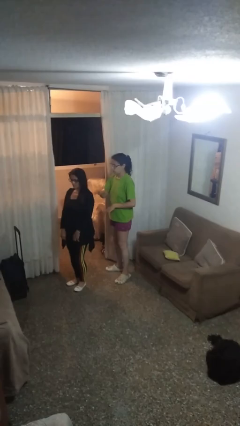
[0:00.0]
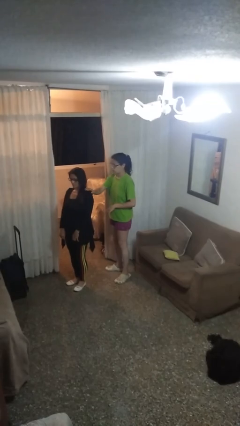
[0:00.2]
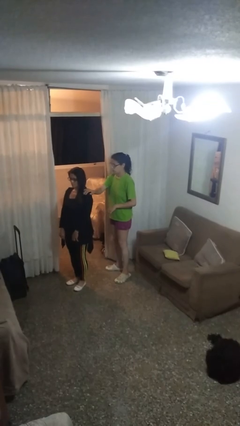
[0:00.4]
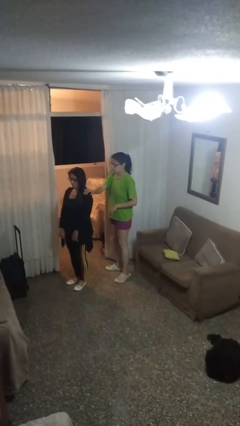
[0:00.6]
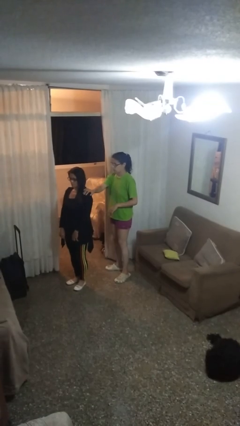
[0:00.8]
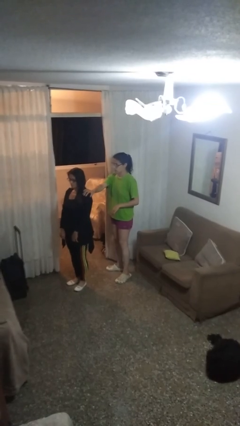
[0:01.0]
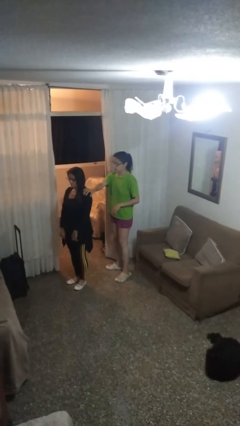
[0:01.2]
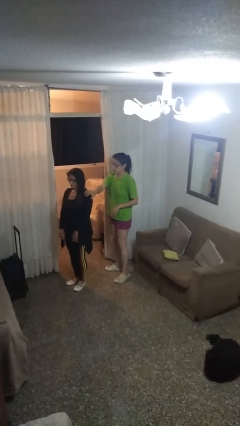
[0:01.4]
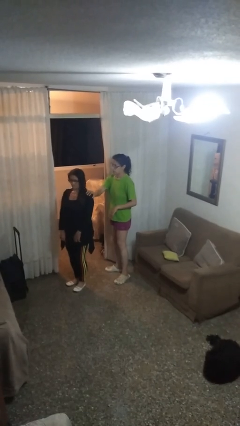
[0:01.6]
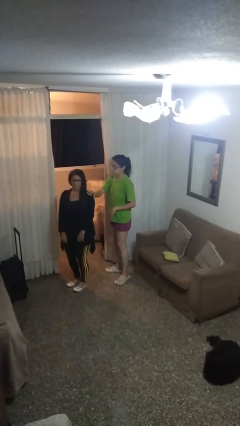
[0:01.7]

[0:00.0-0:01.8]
person grabs person by shoulder

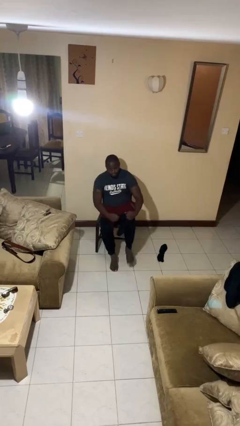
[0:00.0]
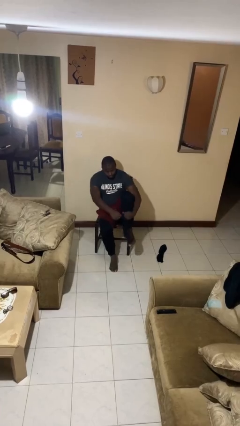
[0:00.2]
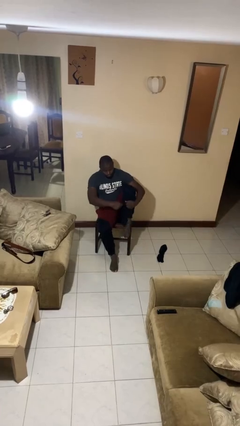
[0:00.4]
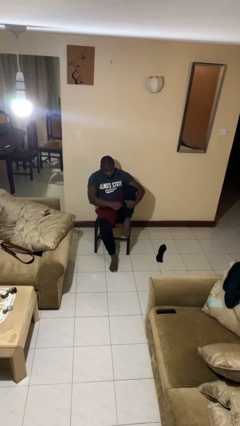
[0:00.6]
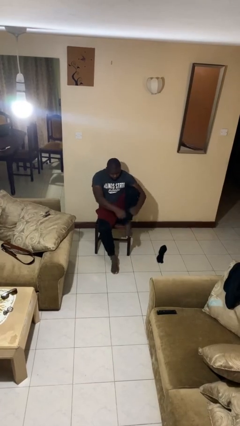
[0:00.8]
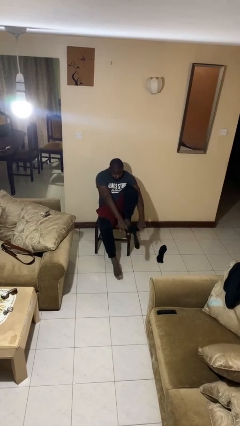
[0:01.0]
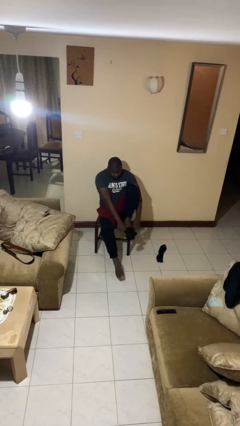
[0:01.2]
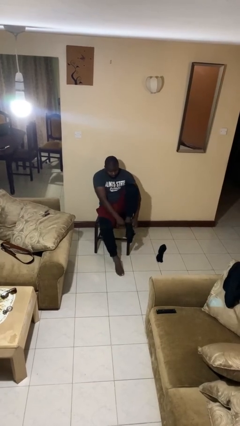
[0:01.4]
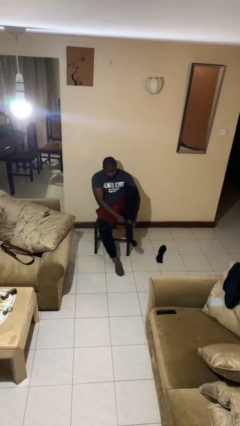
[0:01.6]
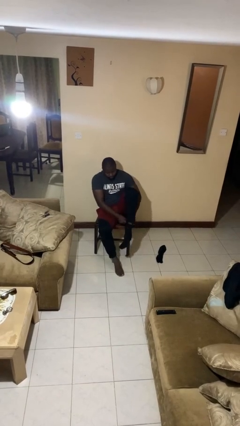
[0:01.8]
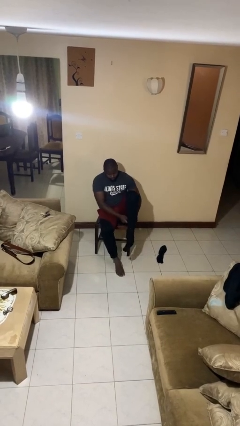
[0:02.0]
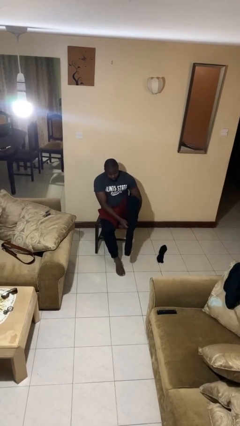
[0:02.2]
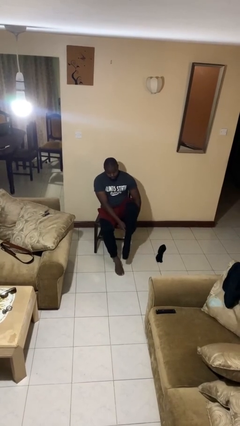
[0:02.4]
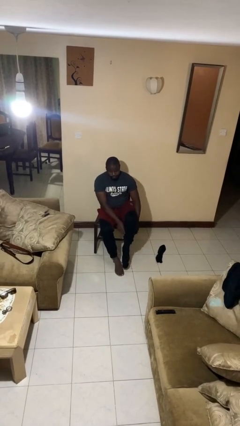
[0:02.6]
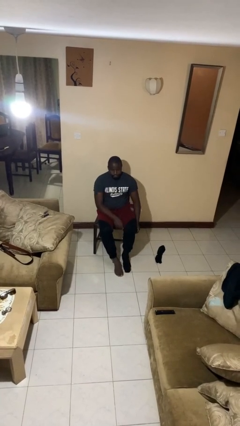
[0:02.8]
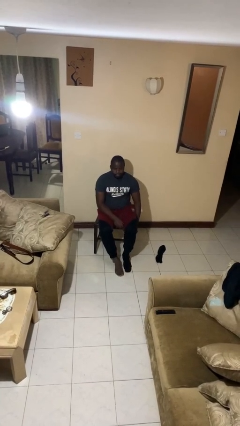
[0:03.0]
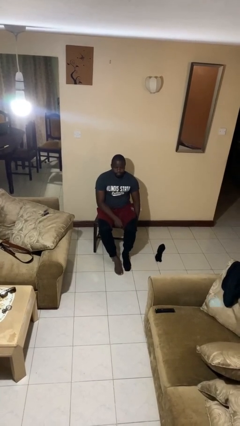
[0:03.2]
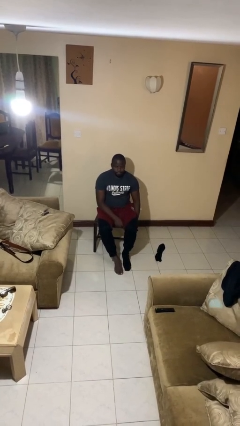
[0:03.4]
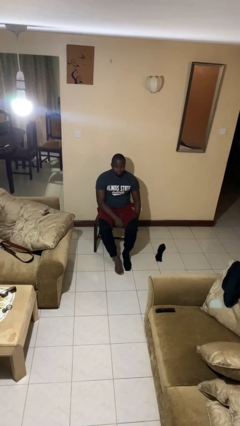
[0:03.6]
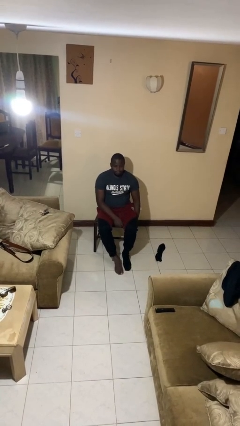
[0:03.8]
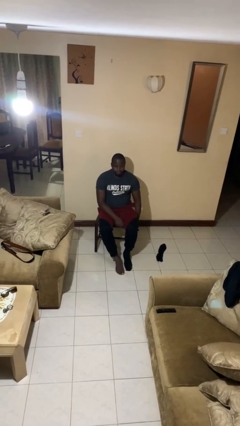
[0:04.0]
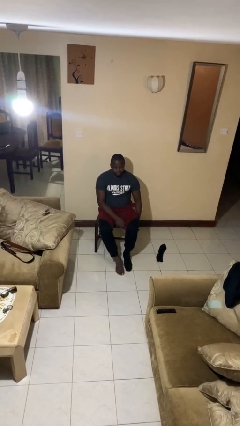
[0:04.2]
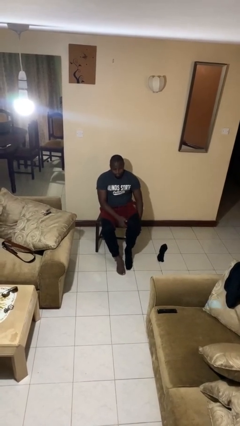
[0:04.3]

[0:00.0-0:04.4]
person puts on socks

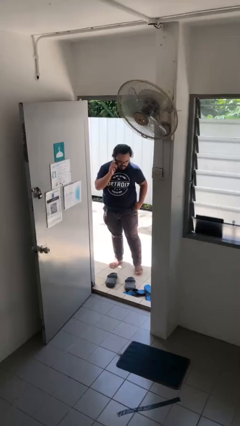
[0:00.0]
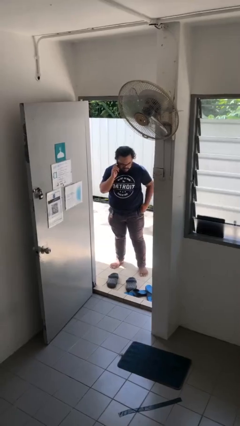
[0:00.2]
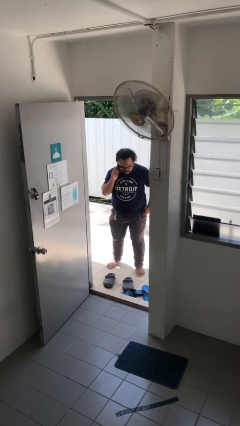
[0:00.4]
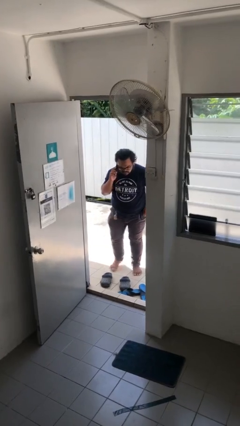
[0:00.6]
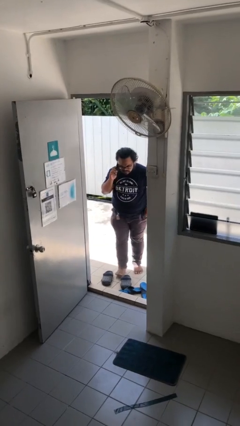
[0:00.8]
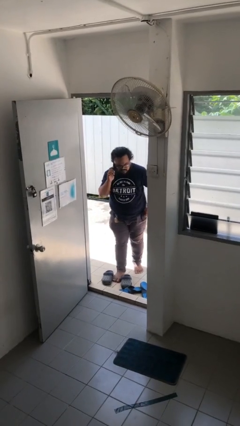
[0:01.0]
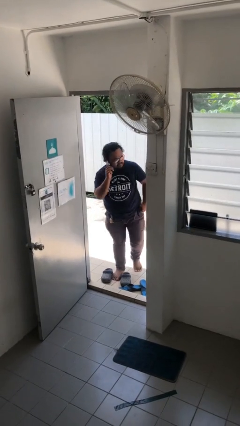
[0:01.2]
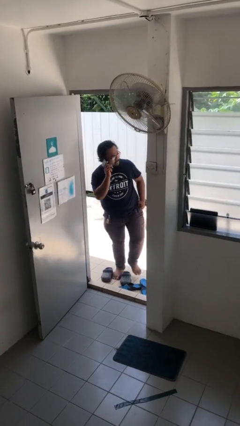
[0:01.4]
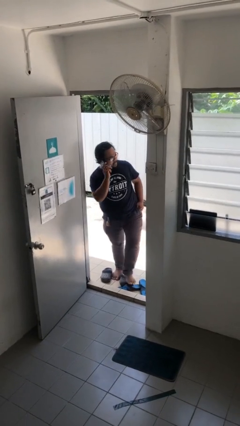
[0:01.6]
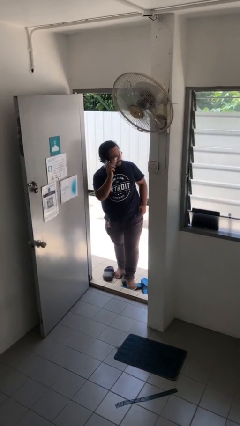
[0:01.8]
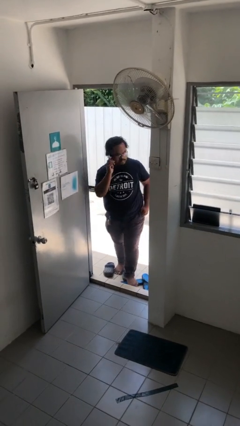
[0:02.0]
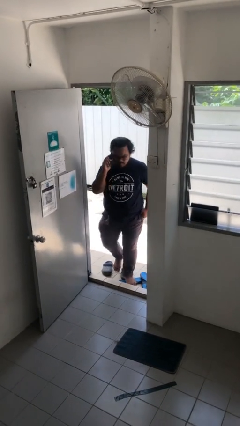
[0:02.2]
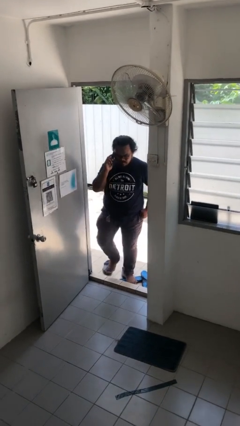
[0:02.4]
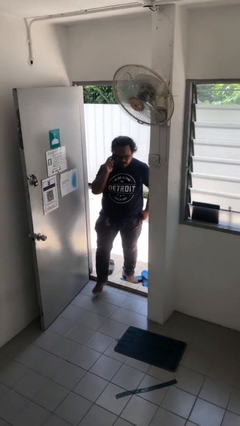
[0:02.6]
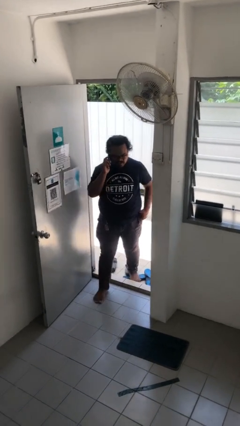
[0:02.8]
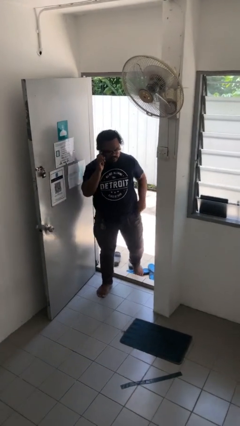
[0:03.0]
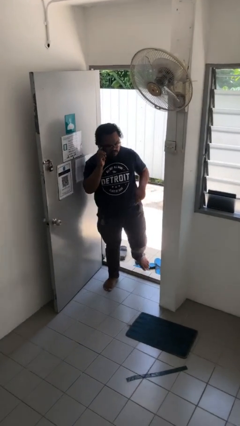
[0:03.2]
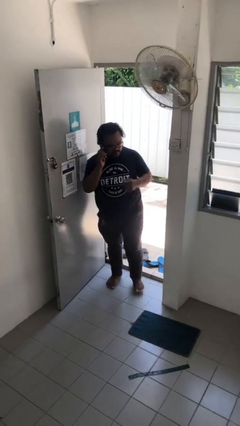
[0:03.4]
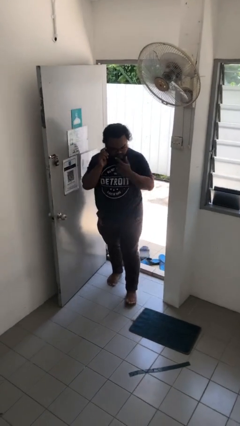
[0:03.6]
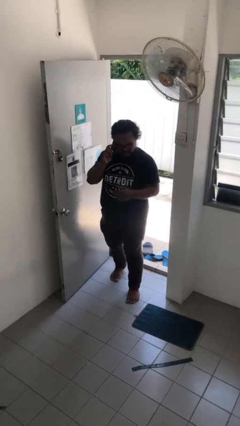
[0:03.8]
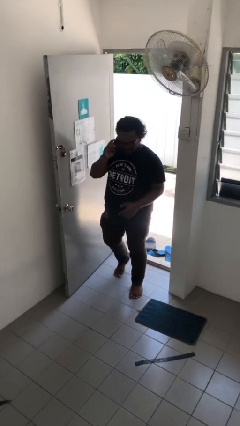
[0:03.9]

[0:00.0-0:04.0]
person enters scene through structure

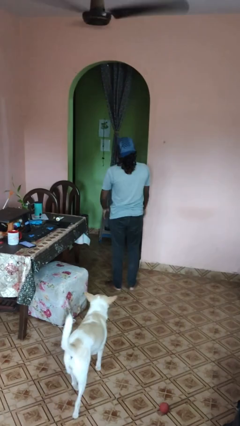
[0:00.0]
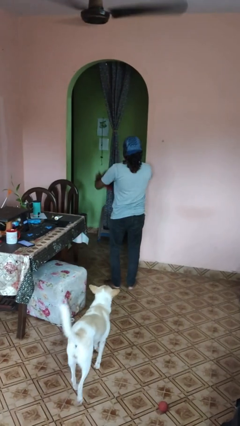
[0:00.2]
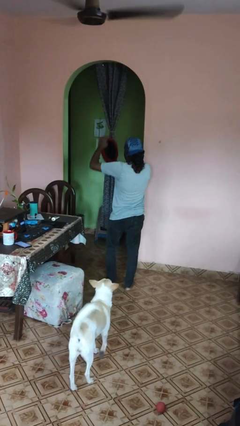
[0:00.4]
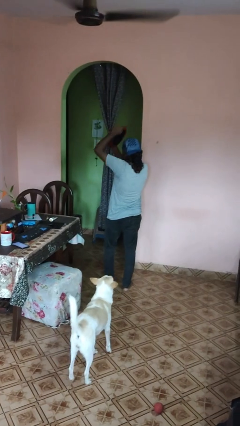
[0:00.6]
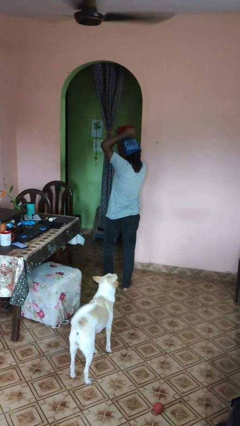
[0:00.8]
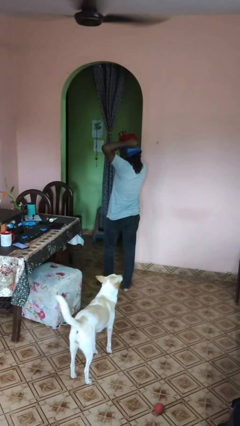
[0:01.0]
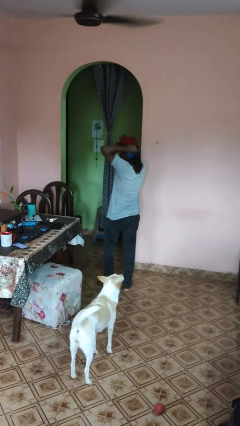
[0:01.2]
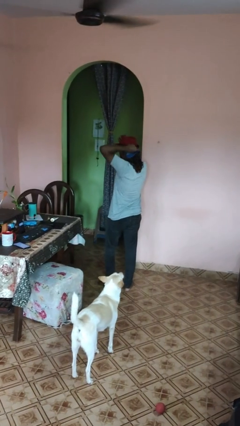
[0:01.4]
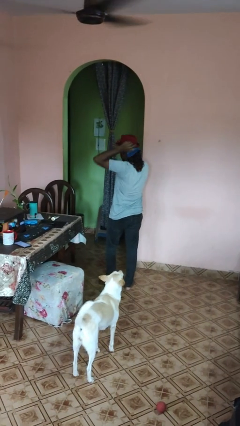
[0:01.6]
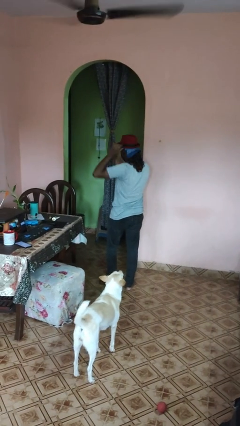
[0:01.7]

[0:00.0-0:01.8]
person puts on hat

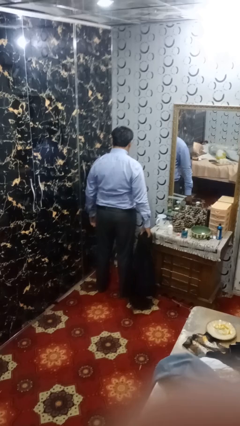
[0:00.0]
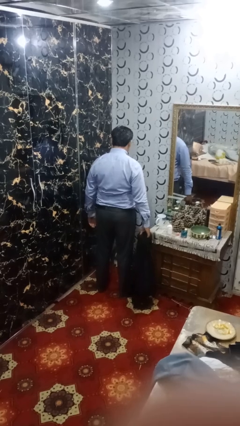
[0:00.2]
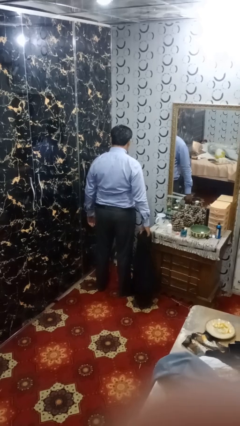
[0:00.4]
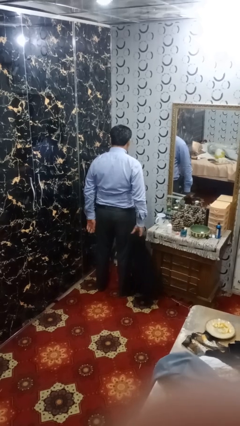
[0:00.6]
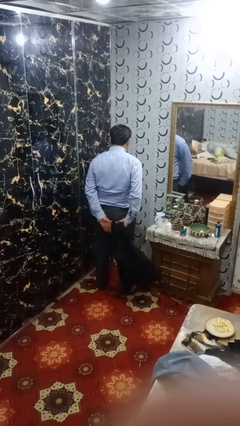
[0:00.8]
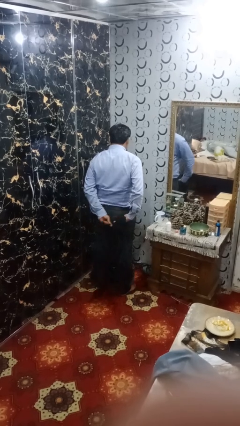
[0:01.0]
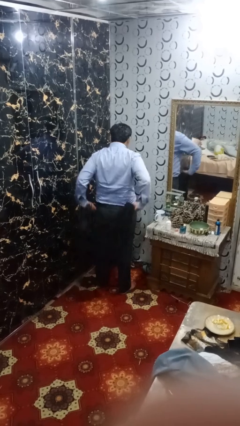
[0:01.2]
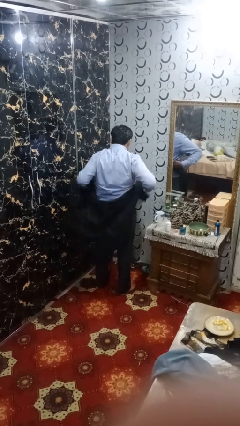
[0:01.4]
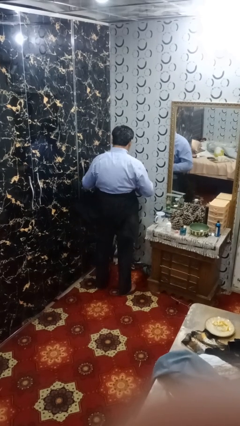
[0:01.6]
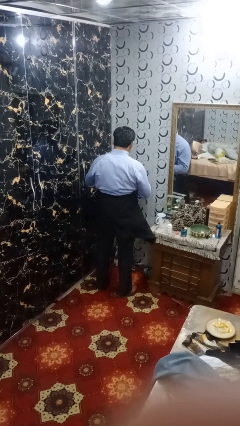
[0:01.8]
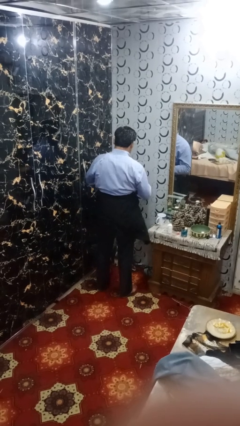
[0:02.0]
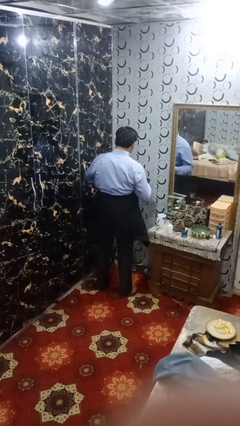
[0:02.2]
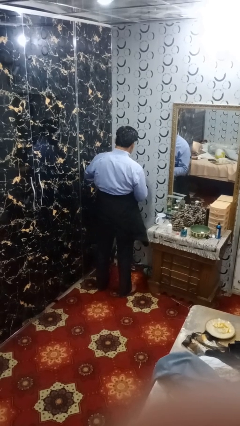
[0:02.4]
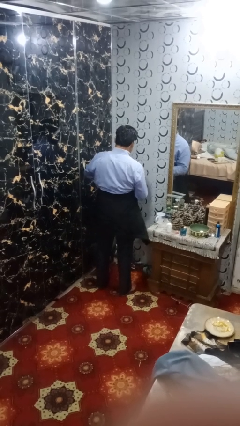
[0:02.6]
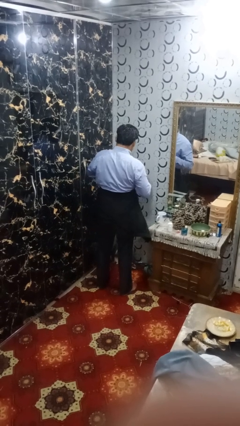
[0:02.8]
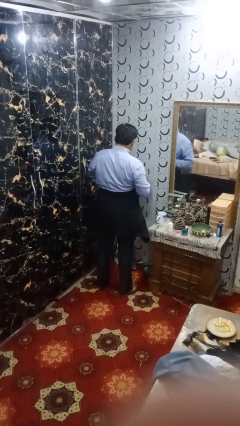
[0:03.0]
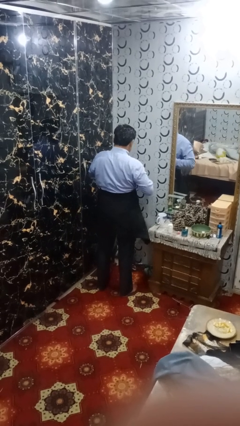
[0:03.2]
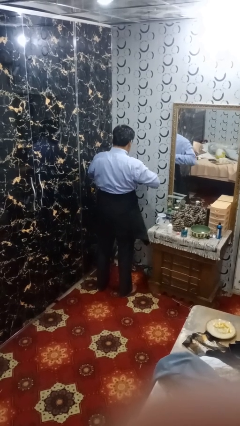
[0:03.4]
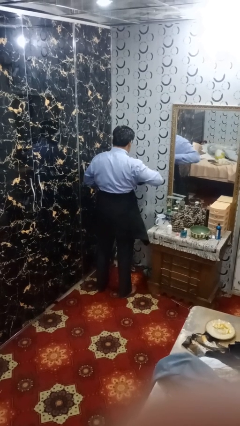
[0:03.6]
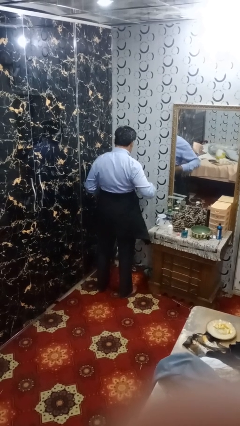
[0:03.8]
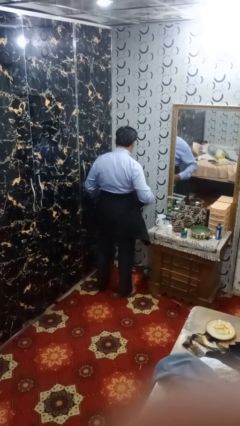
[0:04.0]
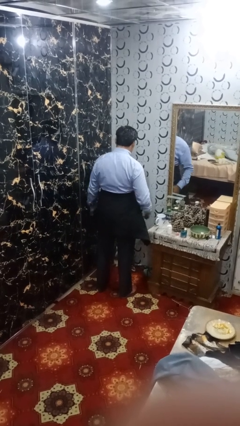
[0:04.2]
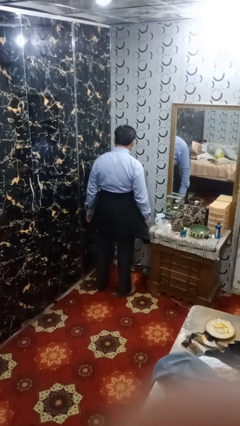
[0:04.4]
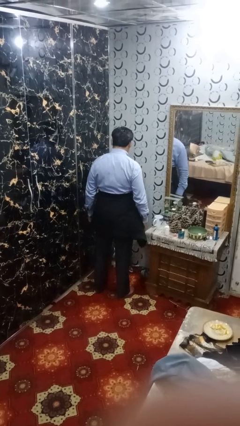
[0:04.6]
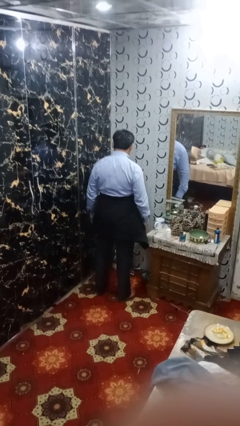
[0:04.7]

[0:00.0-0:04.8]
person ties jacket around waist

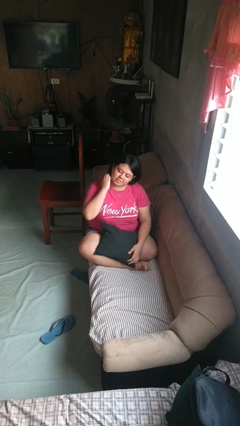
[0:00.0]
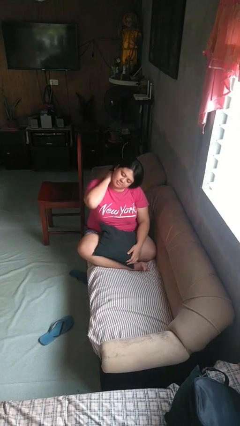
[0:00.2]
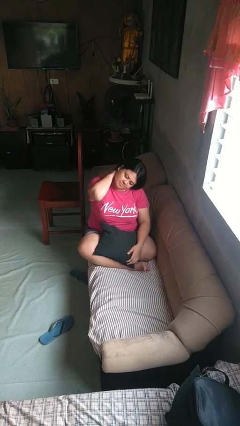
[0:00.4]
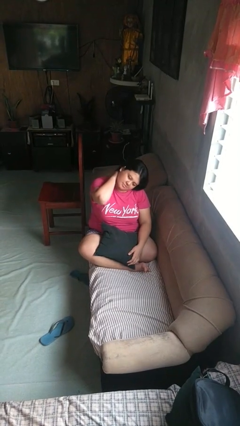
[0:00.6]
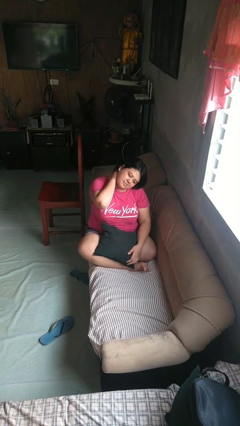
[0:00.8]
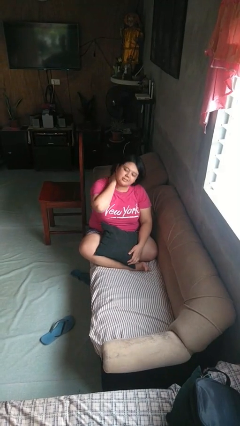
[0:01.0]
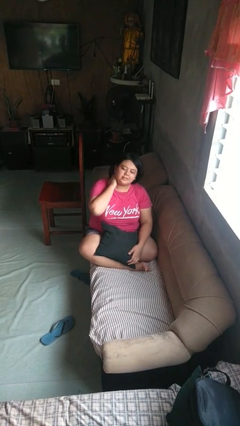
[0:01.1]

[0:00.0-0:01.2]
person rubs neck
